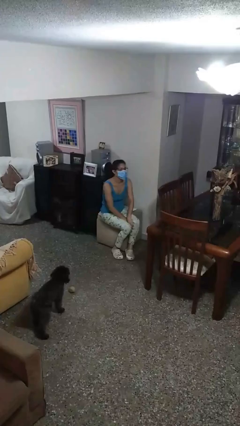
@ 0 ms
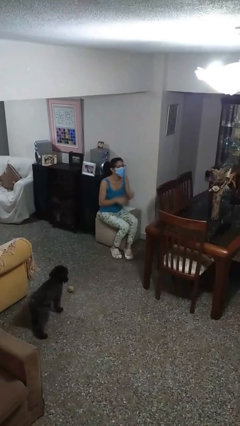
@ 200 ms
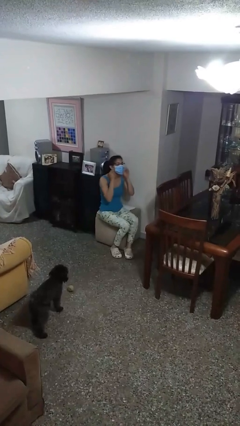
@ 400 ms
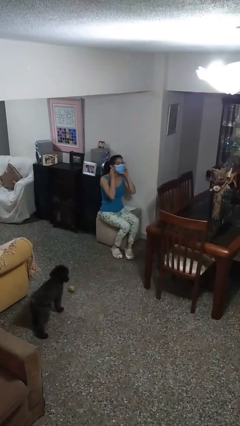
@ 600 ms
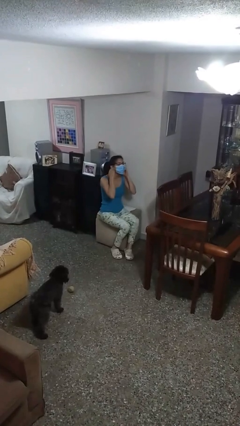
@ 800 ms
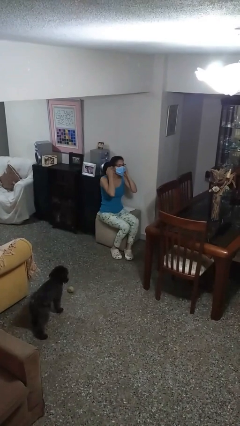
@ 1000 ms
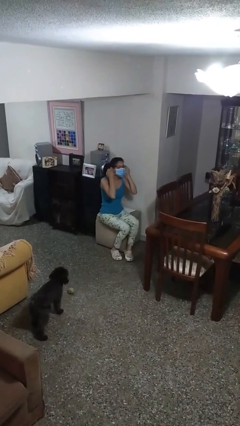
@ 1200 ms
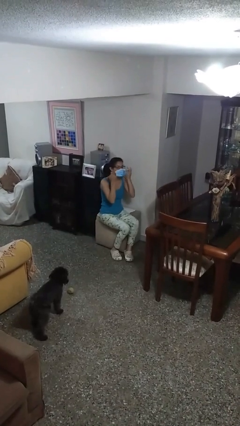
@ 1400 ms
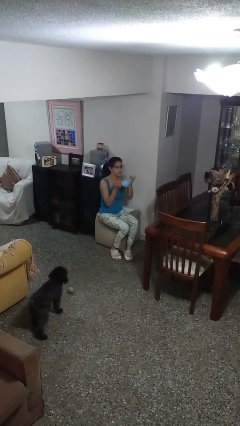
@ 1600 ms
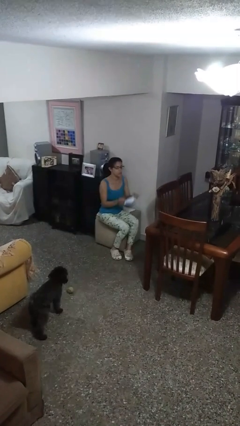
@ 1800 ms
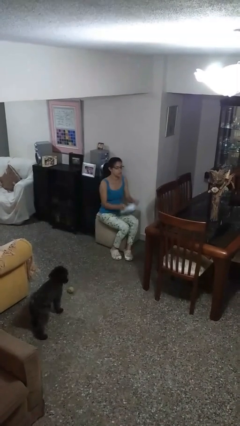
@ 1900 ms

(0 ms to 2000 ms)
person takes off facemask

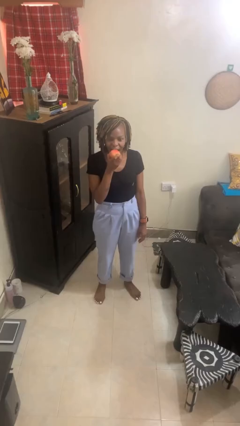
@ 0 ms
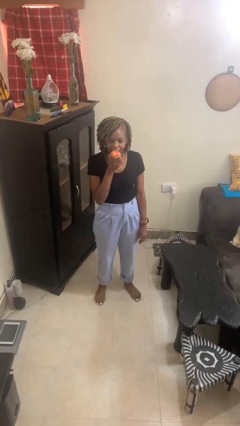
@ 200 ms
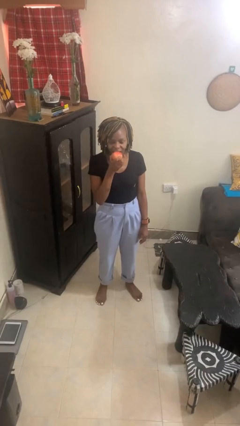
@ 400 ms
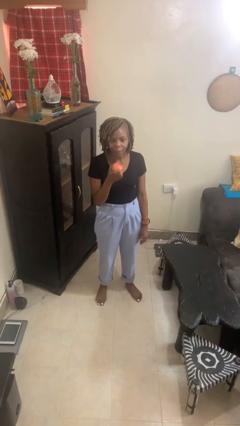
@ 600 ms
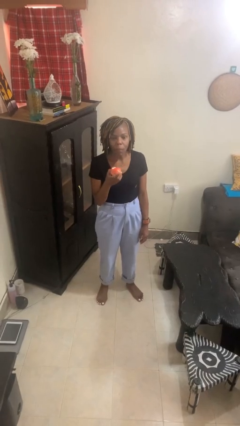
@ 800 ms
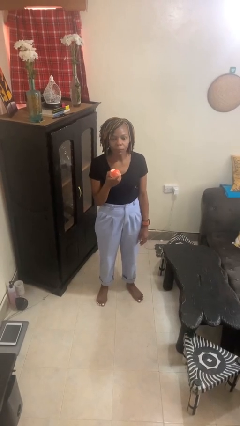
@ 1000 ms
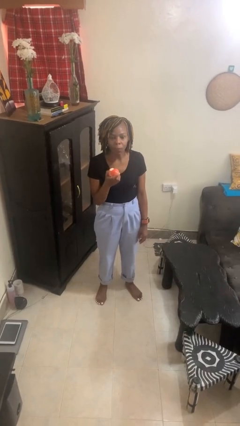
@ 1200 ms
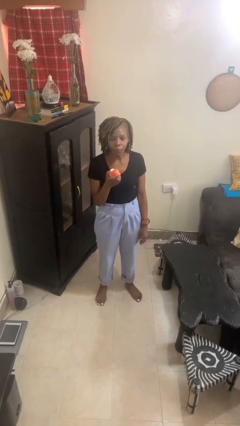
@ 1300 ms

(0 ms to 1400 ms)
person eats apple

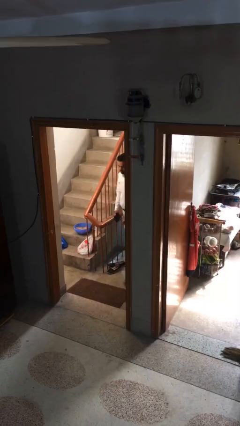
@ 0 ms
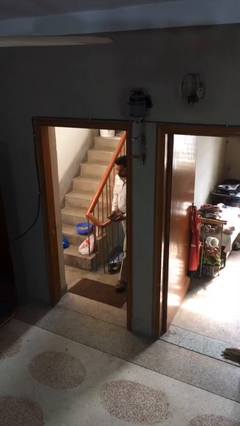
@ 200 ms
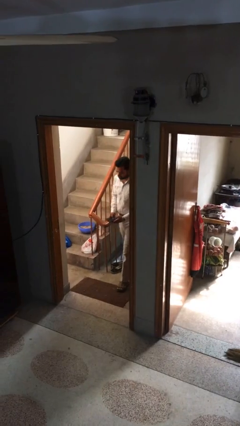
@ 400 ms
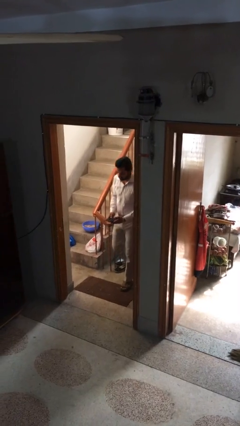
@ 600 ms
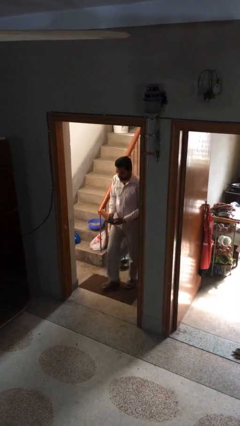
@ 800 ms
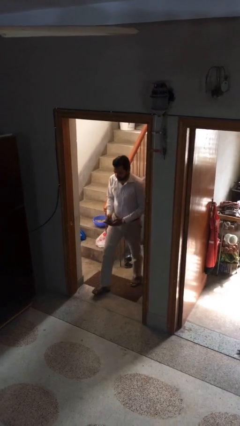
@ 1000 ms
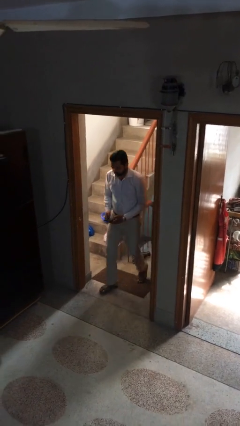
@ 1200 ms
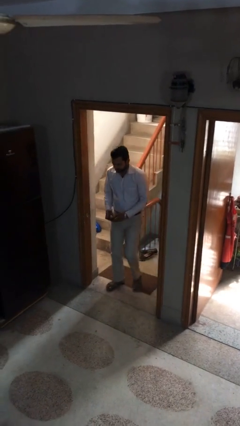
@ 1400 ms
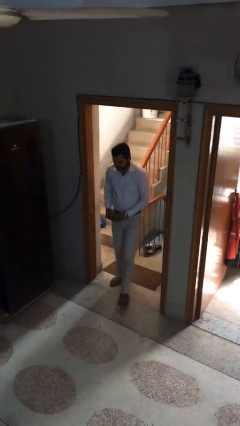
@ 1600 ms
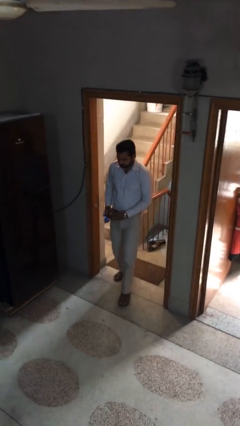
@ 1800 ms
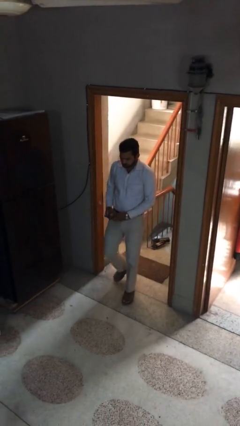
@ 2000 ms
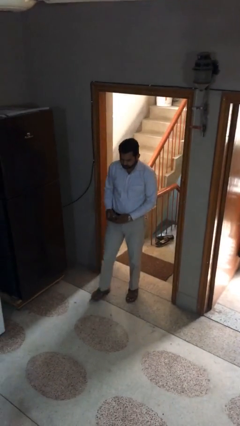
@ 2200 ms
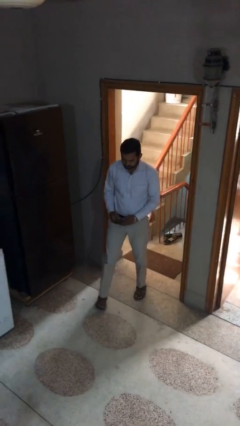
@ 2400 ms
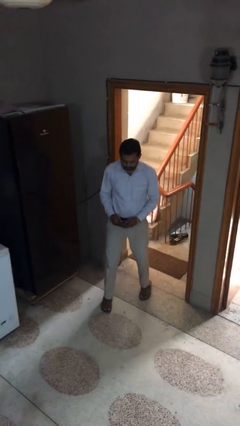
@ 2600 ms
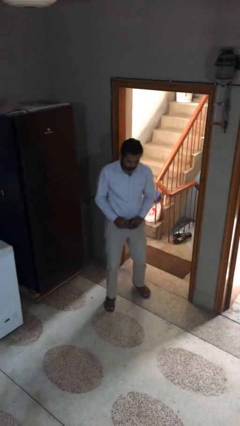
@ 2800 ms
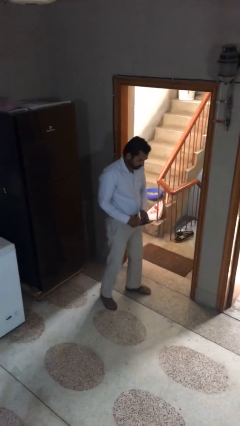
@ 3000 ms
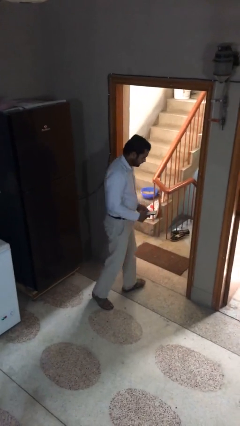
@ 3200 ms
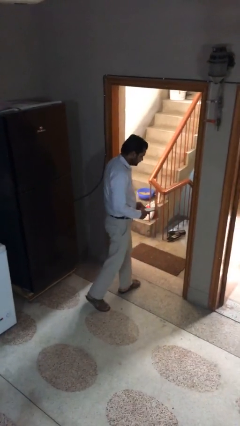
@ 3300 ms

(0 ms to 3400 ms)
person enters scene through structure

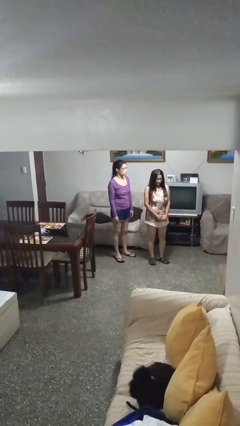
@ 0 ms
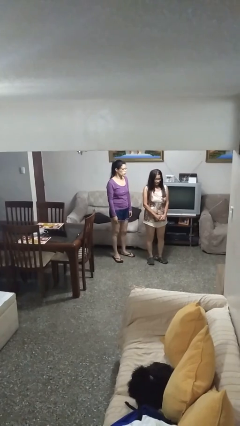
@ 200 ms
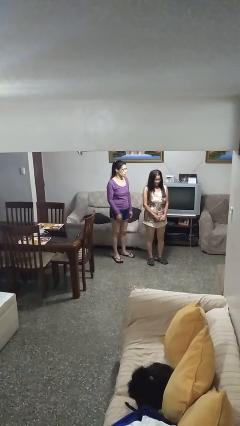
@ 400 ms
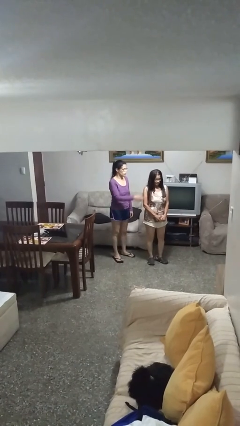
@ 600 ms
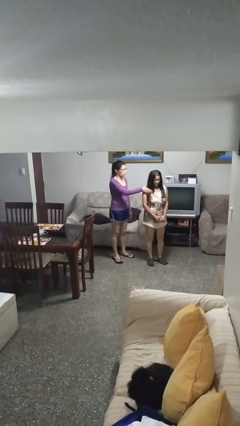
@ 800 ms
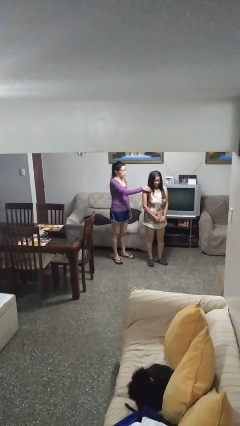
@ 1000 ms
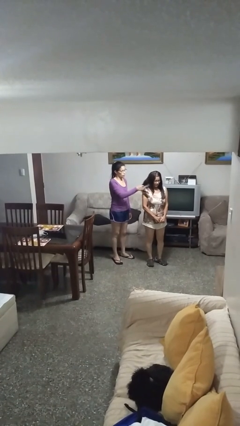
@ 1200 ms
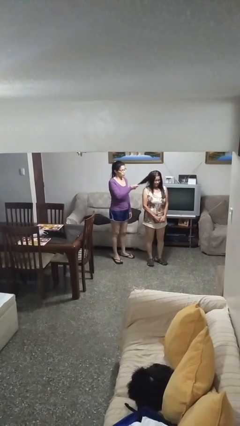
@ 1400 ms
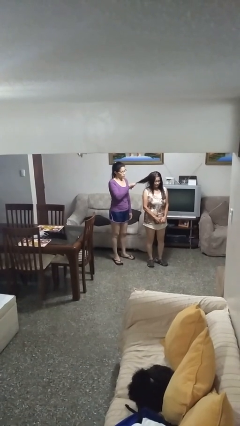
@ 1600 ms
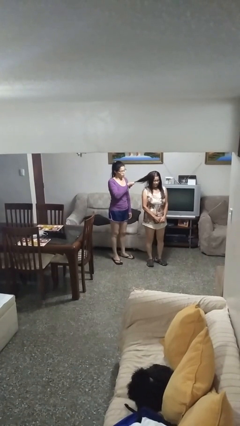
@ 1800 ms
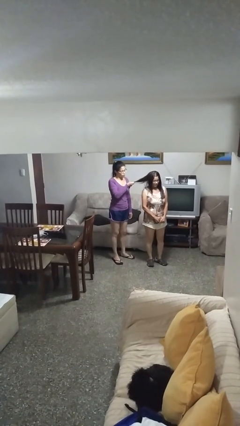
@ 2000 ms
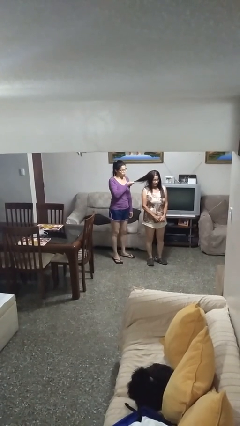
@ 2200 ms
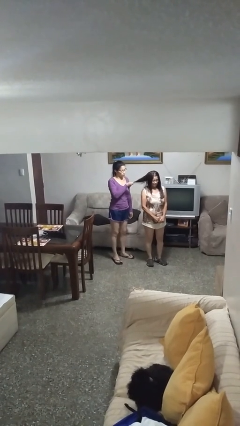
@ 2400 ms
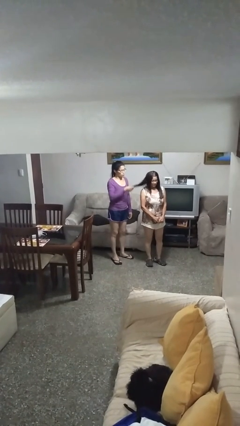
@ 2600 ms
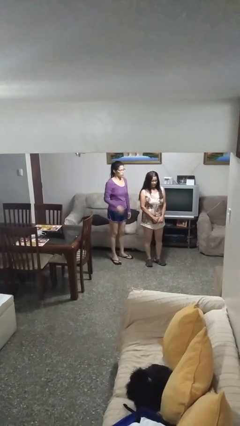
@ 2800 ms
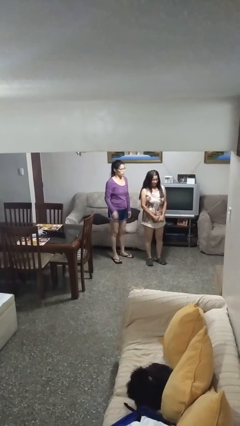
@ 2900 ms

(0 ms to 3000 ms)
person grabs person by hair

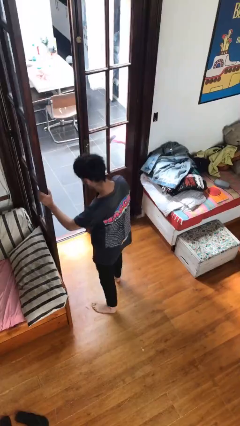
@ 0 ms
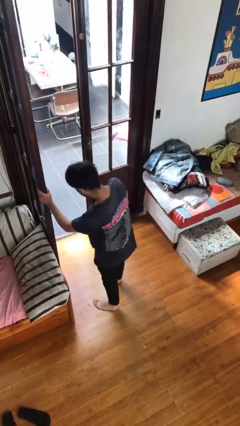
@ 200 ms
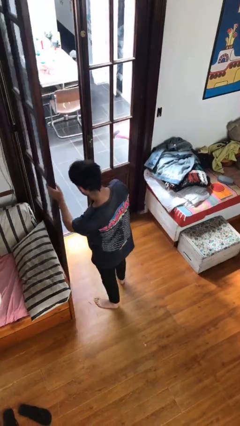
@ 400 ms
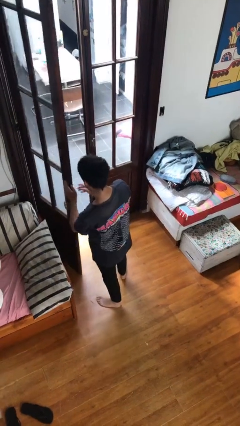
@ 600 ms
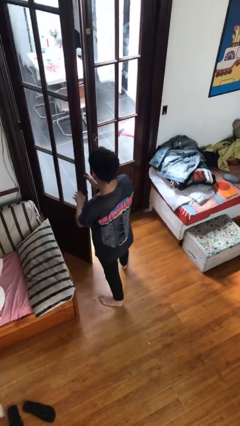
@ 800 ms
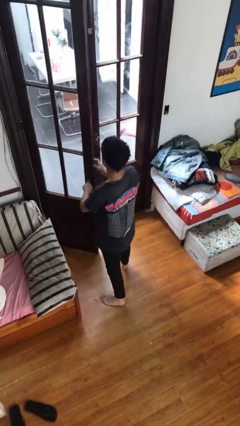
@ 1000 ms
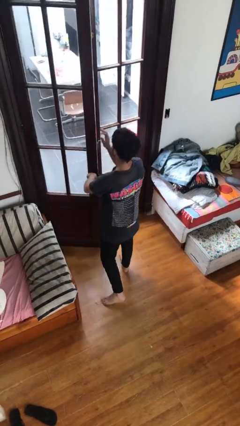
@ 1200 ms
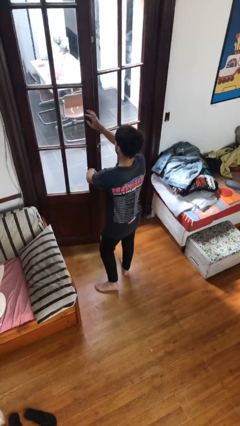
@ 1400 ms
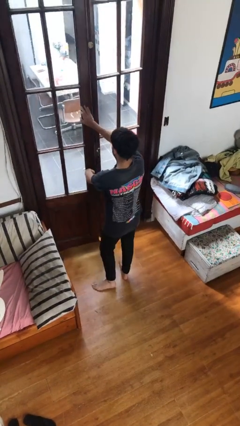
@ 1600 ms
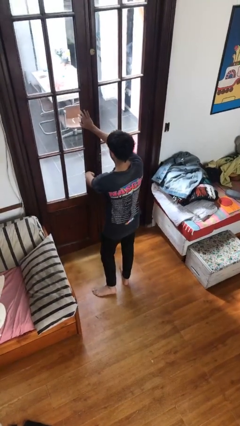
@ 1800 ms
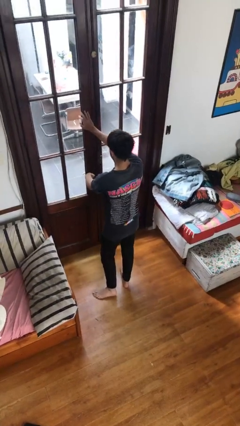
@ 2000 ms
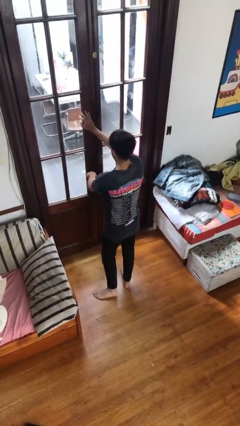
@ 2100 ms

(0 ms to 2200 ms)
person closes facility door

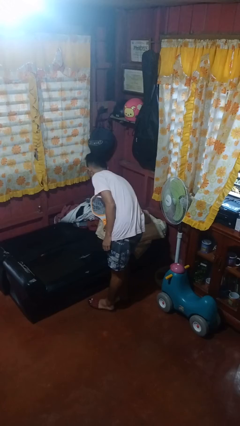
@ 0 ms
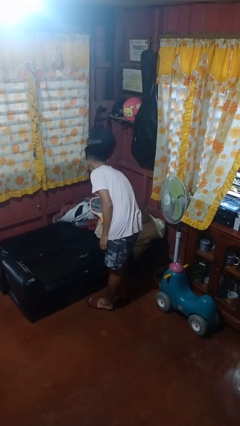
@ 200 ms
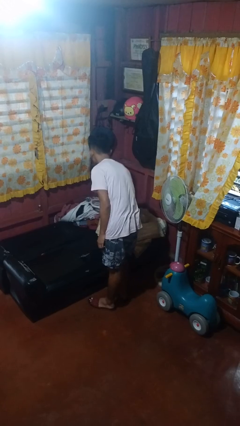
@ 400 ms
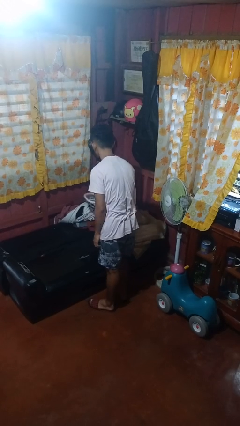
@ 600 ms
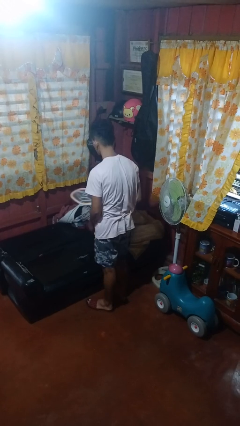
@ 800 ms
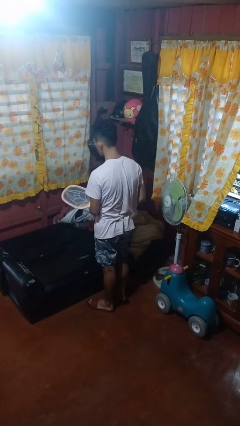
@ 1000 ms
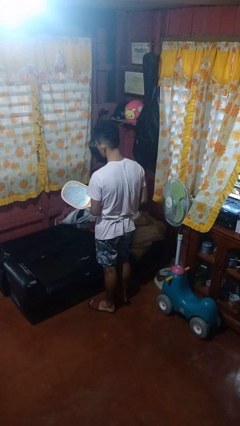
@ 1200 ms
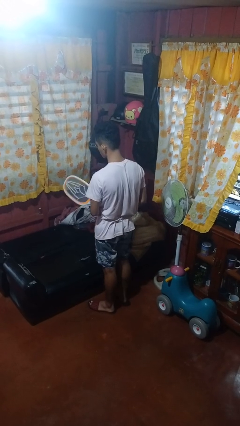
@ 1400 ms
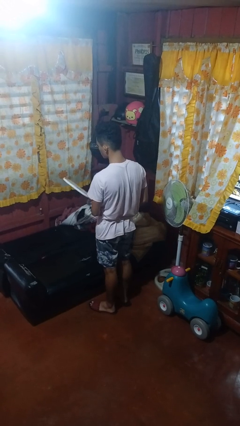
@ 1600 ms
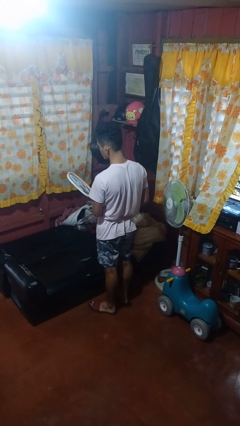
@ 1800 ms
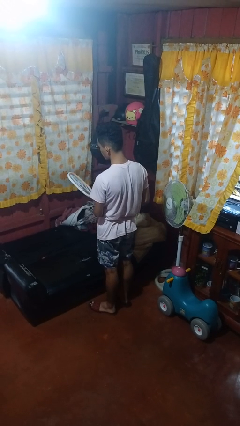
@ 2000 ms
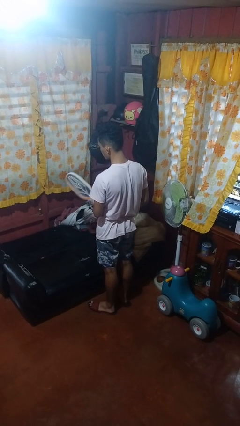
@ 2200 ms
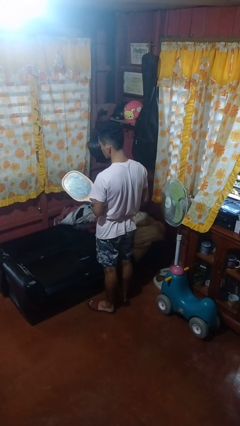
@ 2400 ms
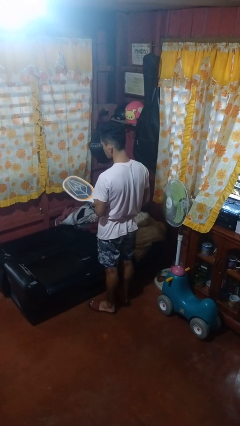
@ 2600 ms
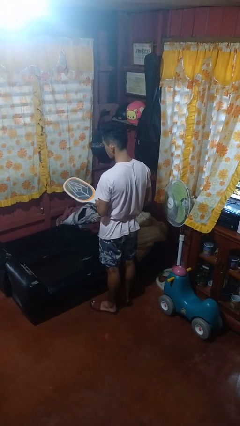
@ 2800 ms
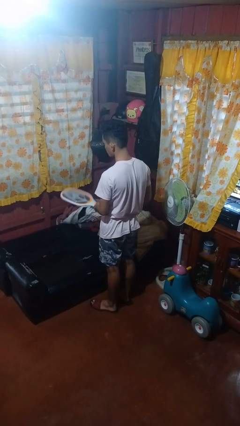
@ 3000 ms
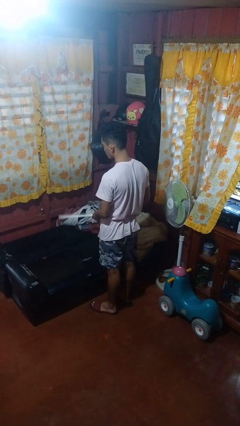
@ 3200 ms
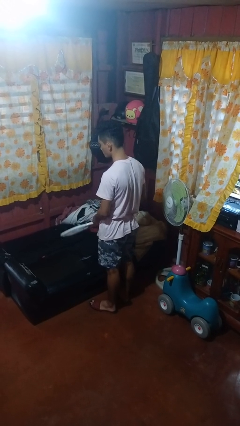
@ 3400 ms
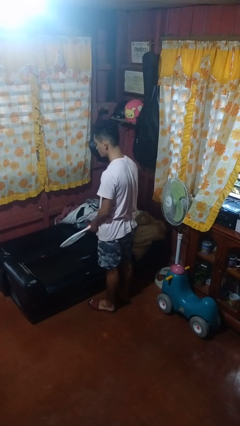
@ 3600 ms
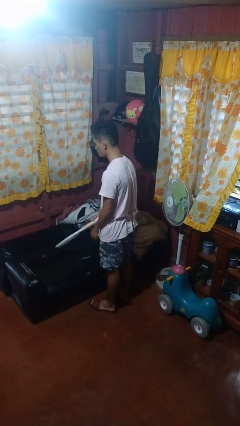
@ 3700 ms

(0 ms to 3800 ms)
person picks up object from couch

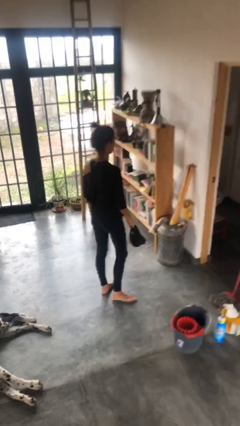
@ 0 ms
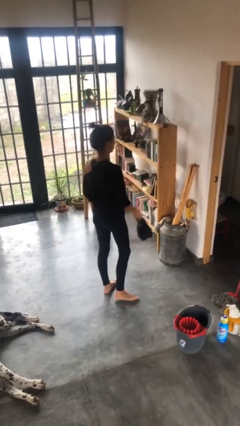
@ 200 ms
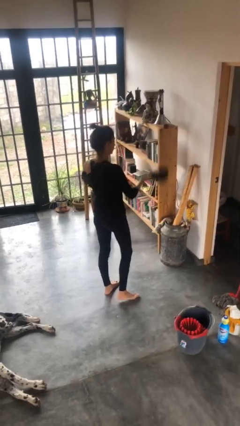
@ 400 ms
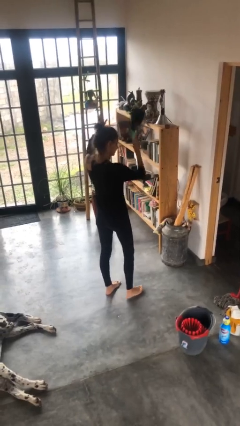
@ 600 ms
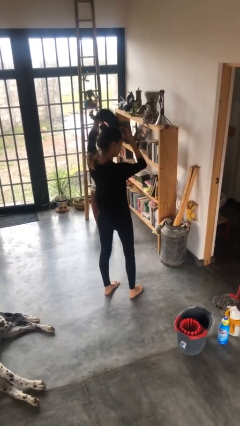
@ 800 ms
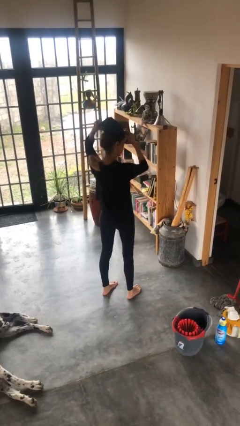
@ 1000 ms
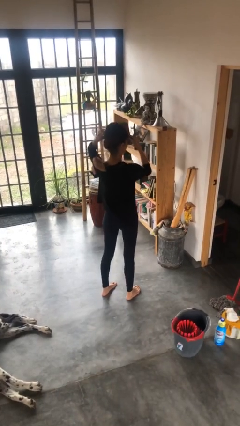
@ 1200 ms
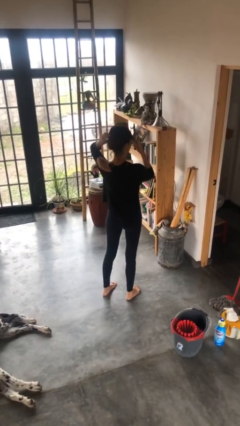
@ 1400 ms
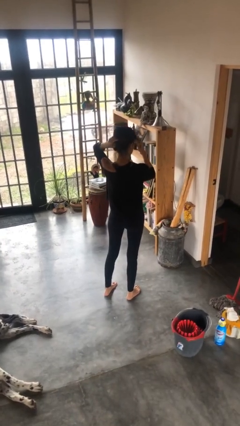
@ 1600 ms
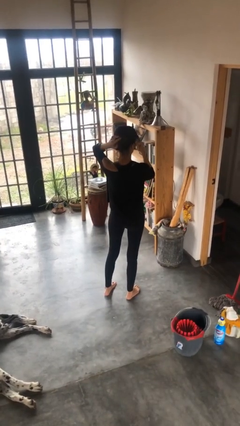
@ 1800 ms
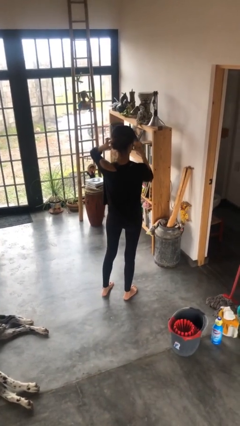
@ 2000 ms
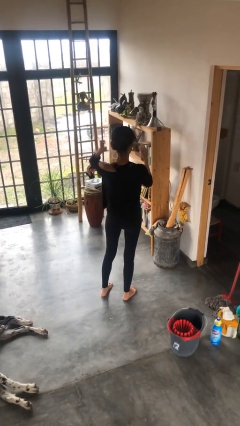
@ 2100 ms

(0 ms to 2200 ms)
person puts on hat
